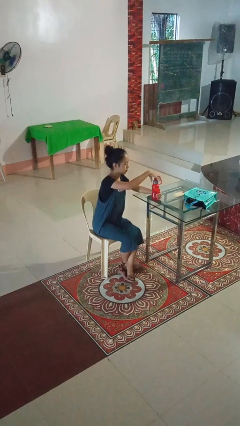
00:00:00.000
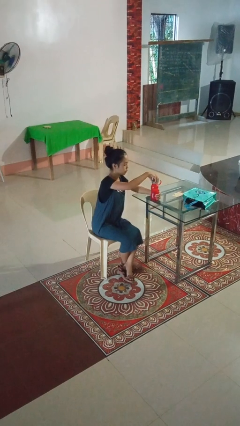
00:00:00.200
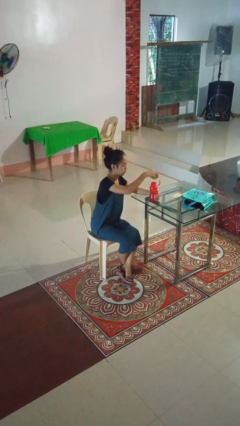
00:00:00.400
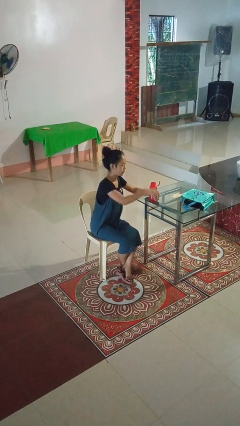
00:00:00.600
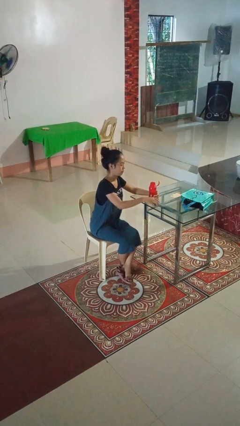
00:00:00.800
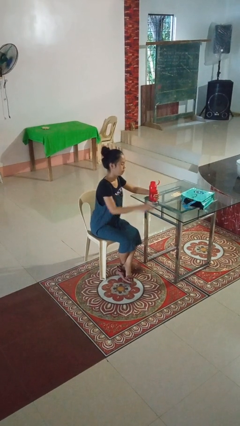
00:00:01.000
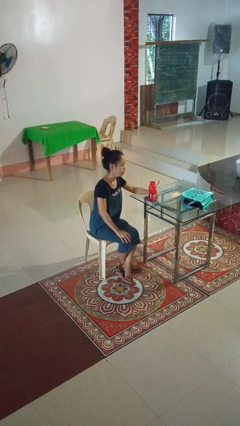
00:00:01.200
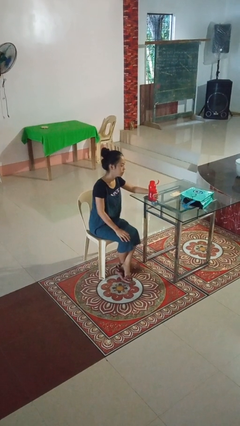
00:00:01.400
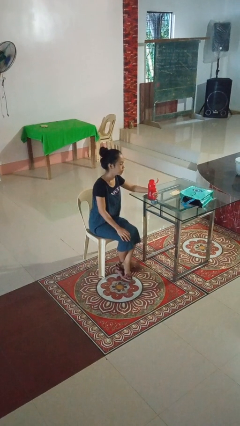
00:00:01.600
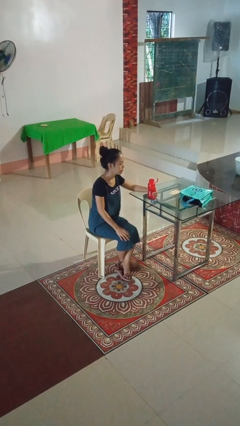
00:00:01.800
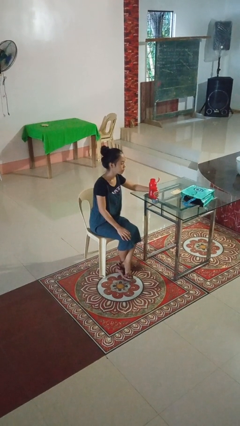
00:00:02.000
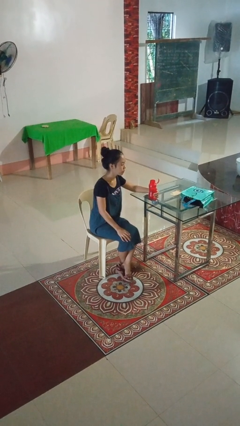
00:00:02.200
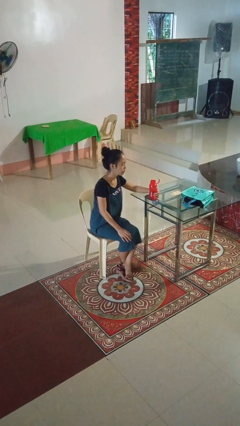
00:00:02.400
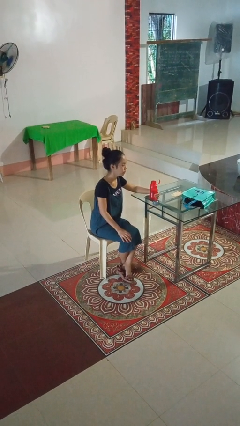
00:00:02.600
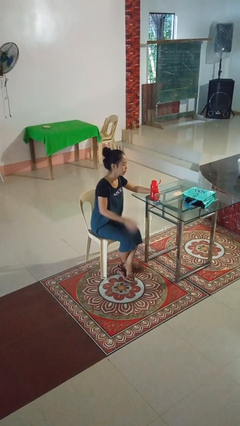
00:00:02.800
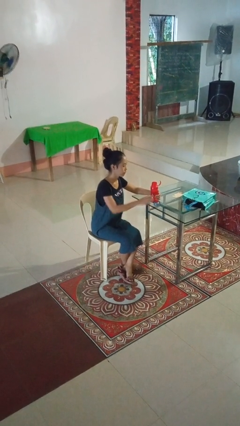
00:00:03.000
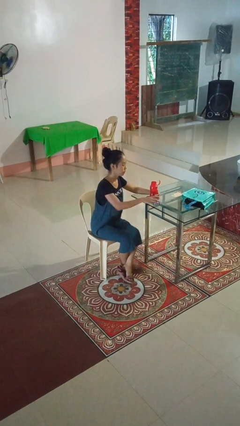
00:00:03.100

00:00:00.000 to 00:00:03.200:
person unscrews lid from bottle

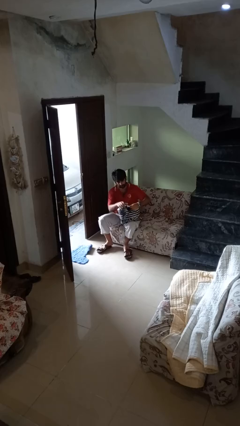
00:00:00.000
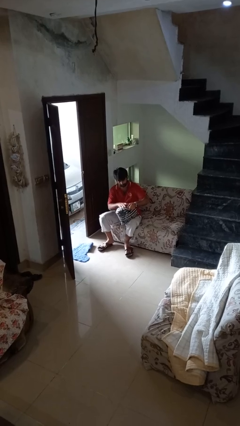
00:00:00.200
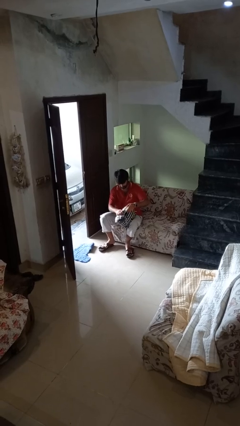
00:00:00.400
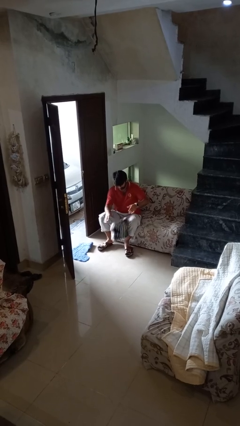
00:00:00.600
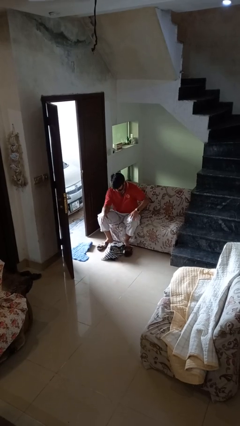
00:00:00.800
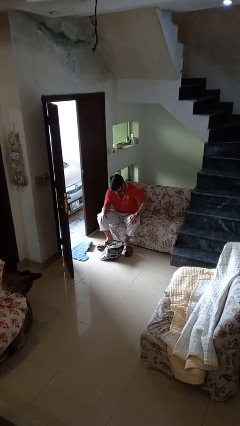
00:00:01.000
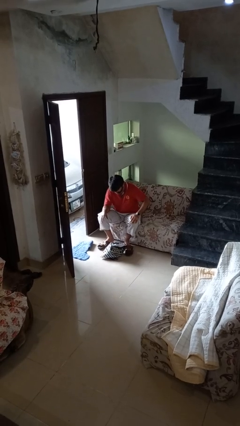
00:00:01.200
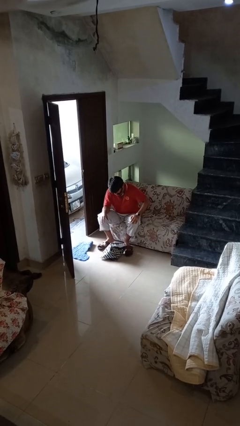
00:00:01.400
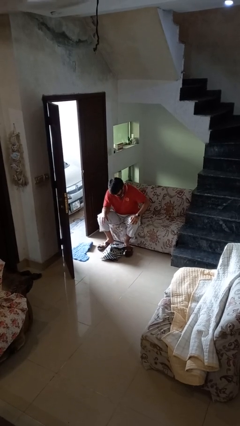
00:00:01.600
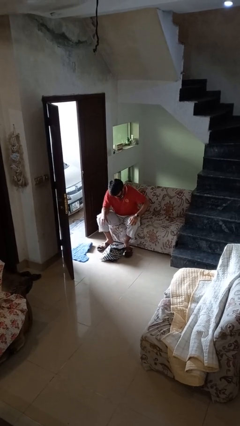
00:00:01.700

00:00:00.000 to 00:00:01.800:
person drops object

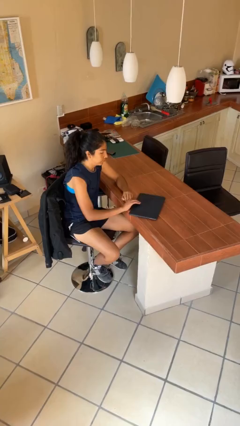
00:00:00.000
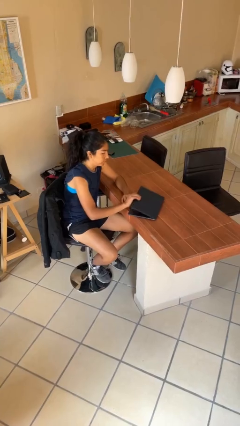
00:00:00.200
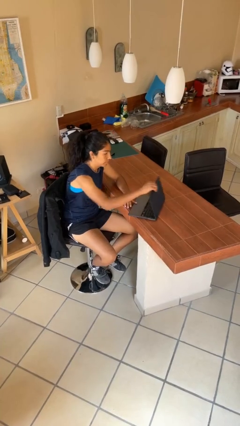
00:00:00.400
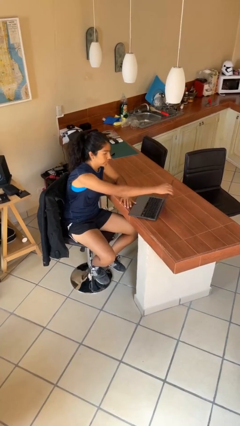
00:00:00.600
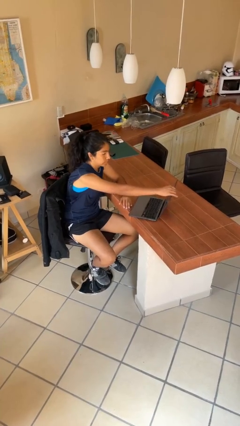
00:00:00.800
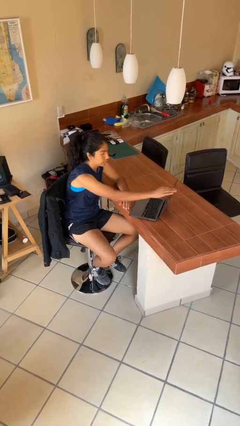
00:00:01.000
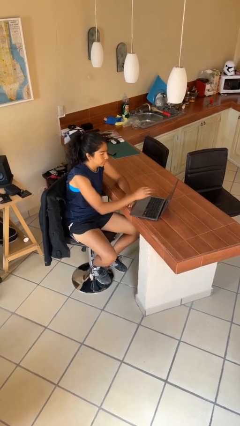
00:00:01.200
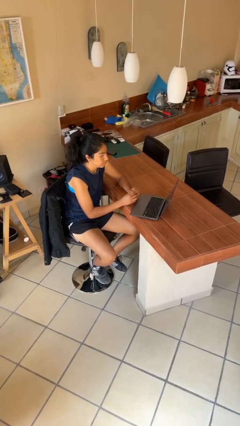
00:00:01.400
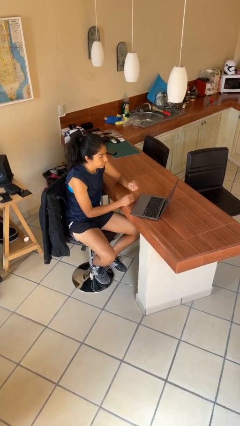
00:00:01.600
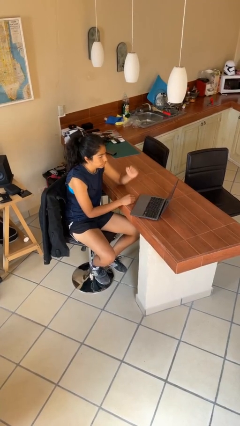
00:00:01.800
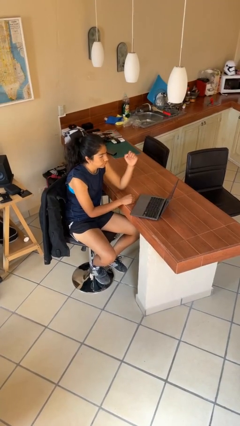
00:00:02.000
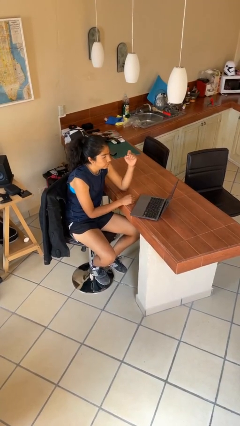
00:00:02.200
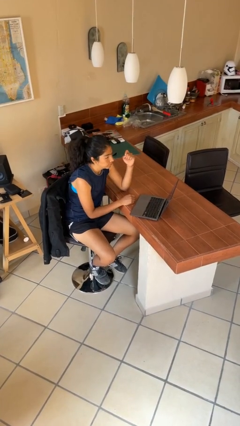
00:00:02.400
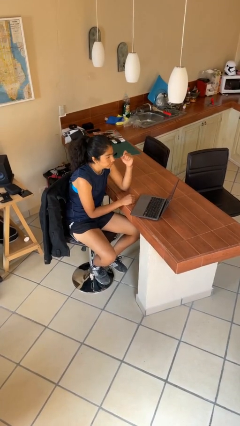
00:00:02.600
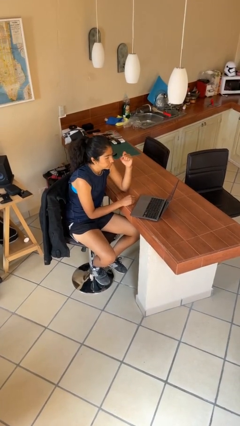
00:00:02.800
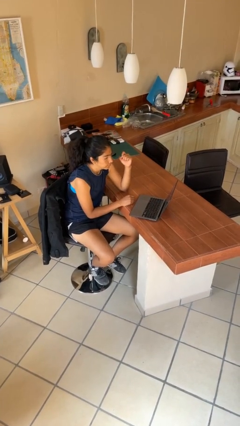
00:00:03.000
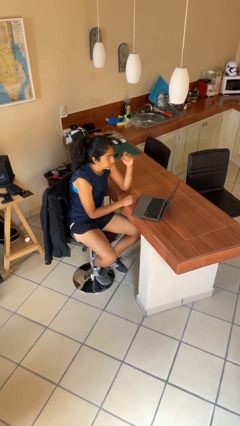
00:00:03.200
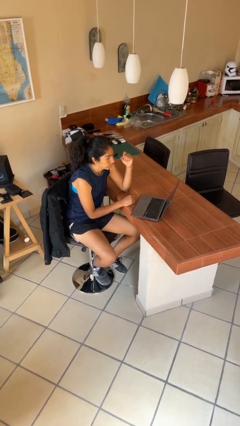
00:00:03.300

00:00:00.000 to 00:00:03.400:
person opens laptop

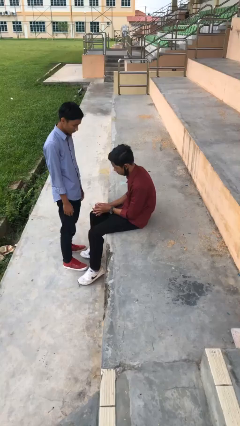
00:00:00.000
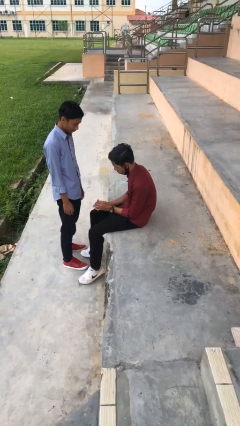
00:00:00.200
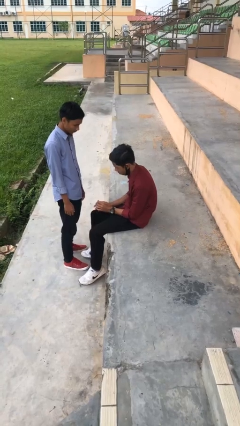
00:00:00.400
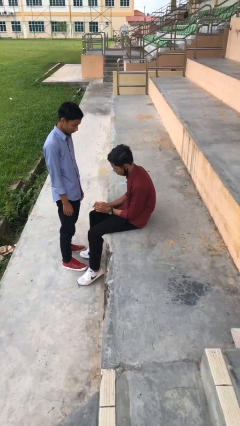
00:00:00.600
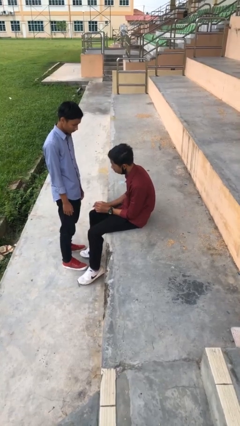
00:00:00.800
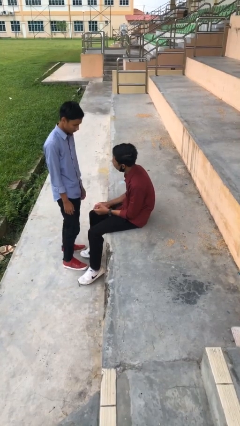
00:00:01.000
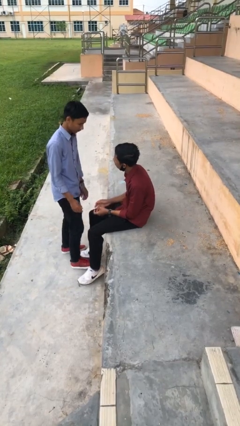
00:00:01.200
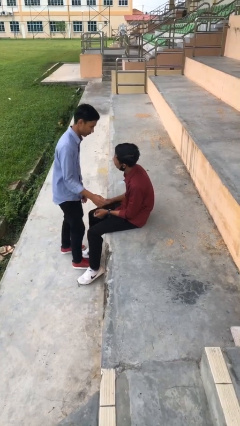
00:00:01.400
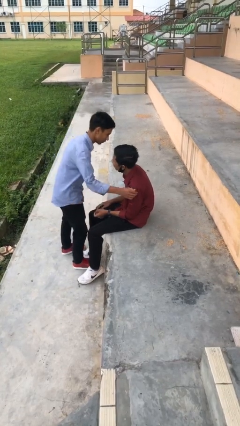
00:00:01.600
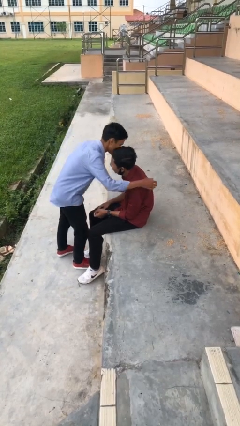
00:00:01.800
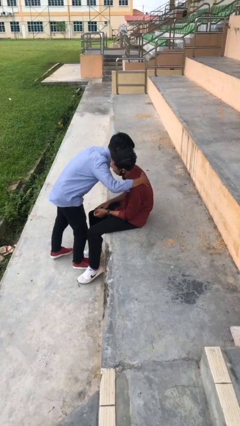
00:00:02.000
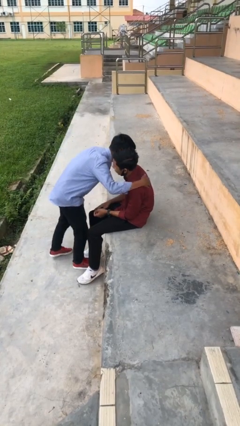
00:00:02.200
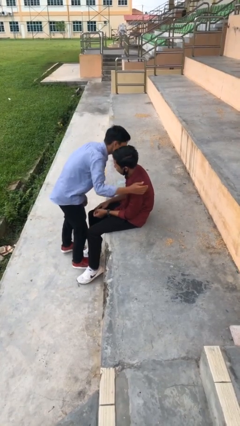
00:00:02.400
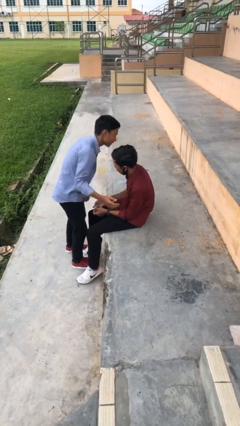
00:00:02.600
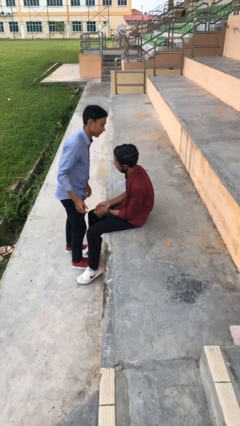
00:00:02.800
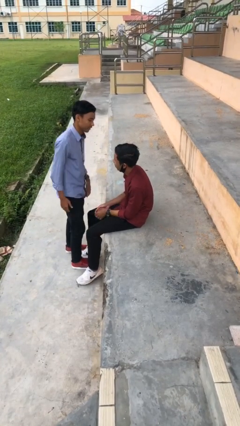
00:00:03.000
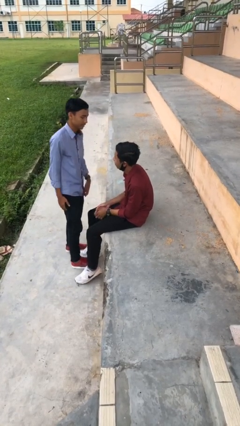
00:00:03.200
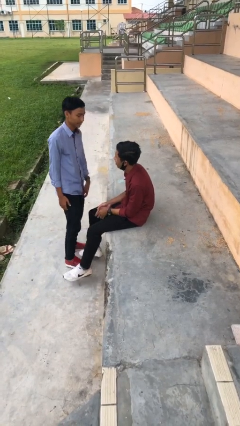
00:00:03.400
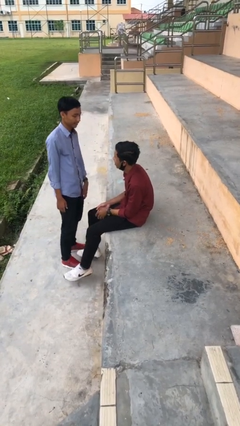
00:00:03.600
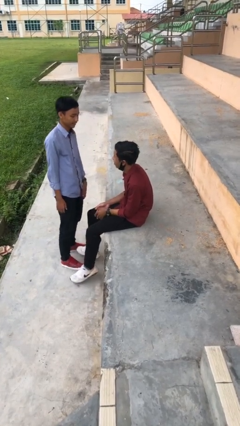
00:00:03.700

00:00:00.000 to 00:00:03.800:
person embraces person

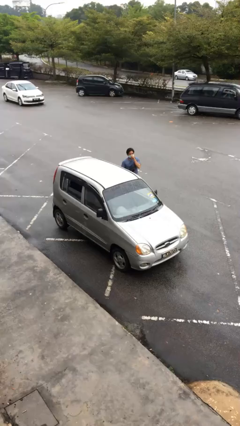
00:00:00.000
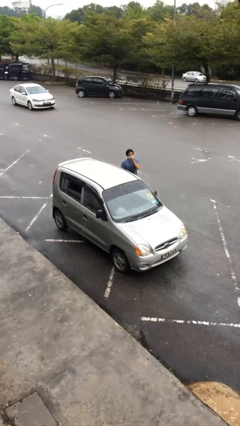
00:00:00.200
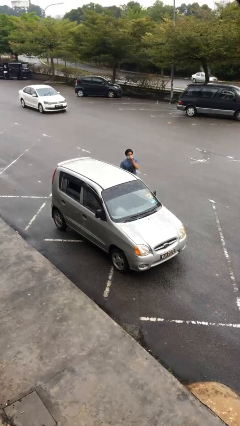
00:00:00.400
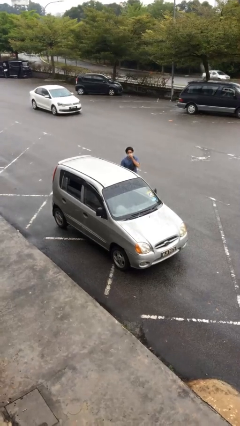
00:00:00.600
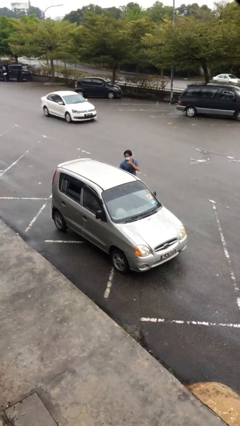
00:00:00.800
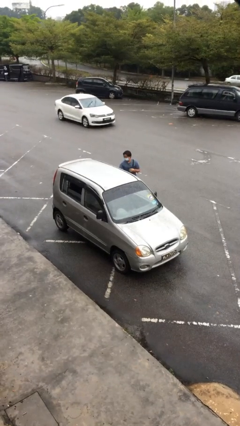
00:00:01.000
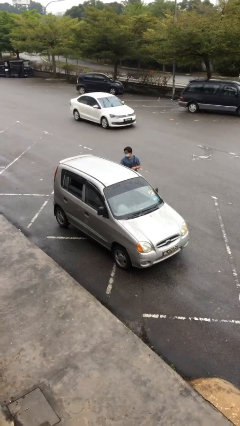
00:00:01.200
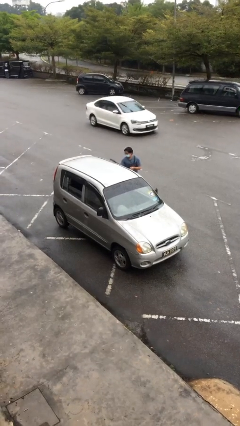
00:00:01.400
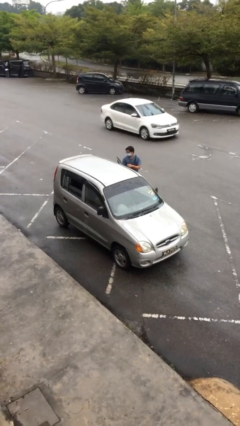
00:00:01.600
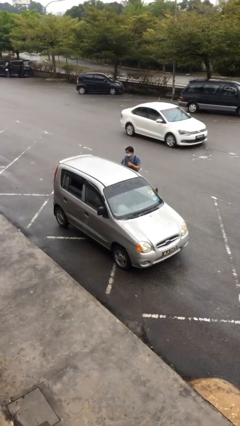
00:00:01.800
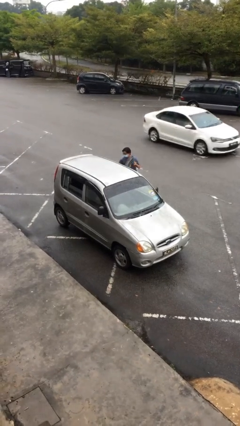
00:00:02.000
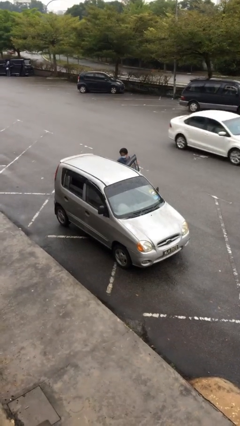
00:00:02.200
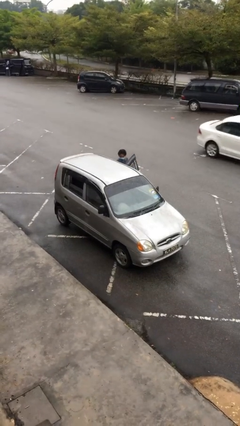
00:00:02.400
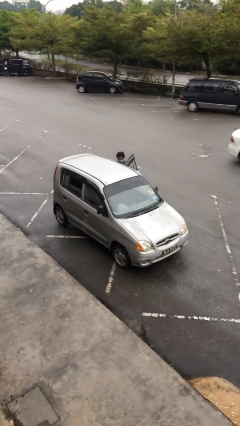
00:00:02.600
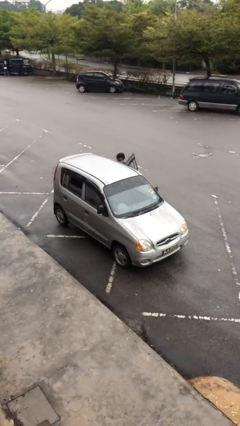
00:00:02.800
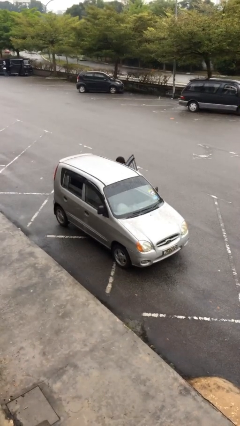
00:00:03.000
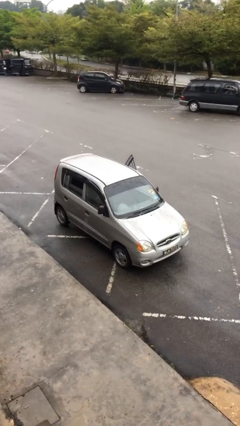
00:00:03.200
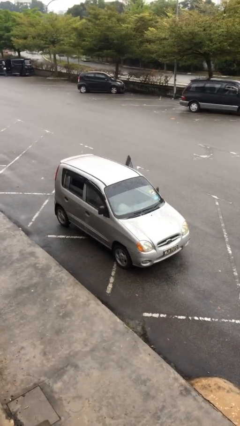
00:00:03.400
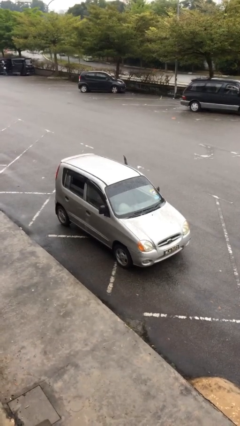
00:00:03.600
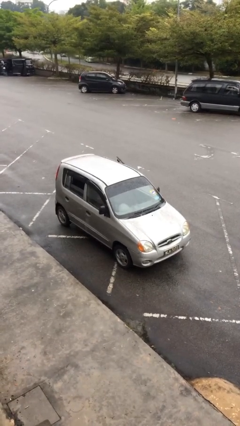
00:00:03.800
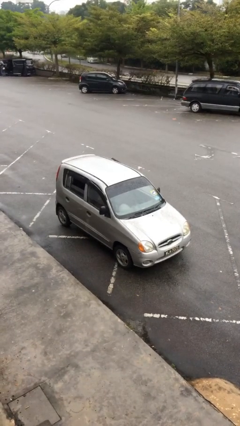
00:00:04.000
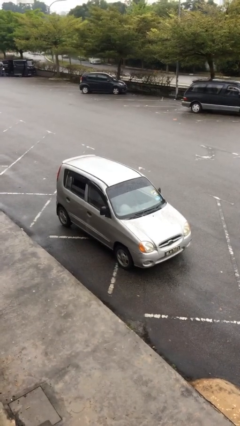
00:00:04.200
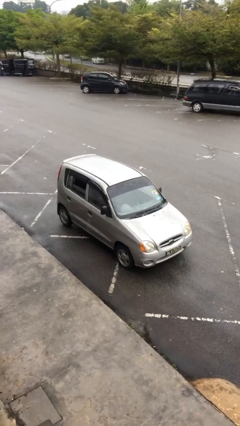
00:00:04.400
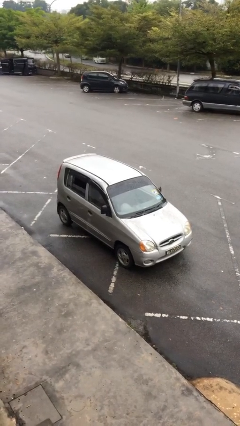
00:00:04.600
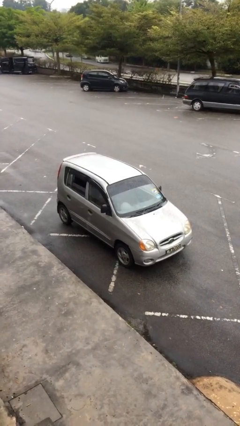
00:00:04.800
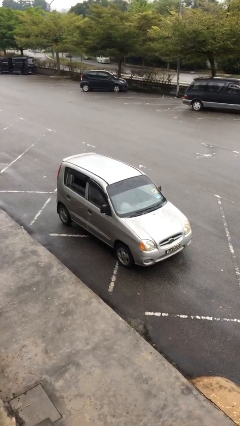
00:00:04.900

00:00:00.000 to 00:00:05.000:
car picks up person
